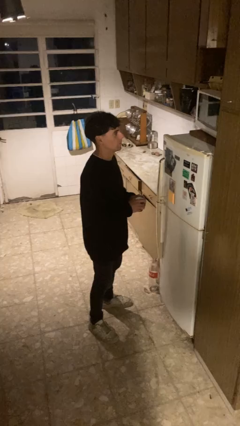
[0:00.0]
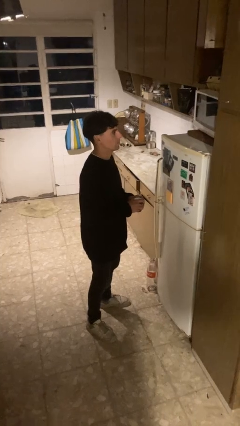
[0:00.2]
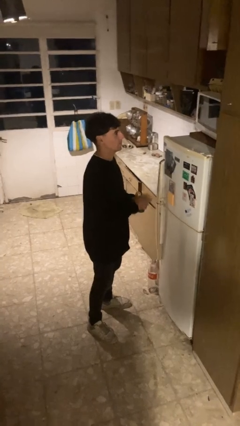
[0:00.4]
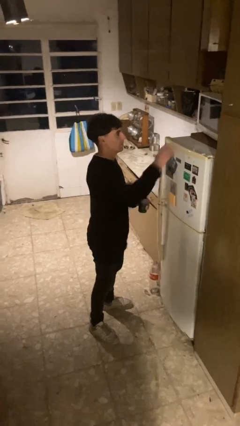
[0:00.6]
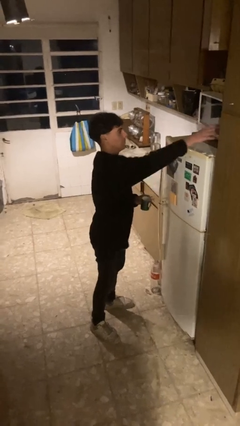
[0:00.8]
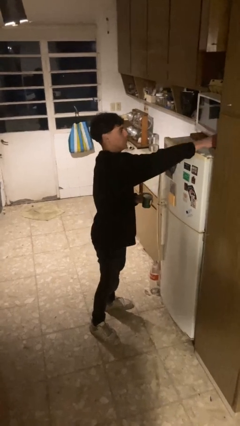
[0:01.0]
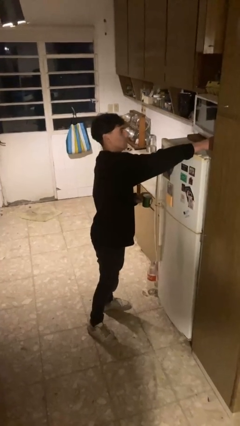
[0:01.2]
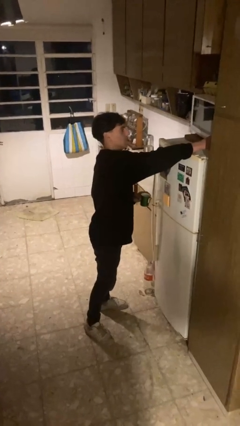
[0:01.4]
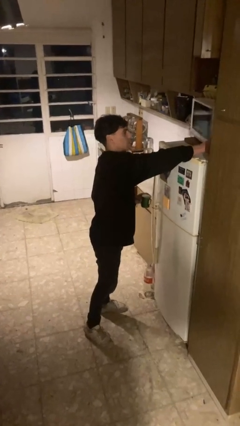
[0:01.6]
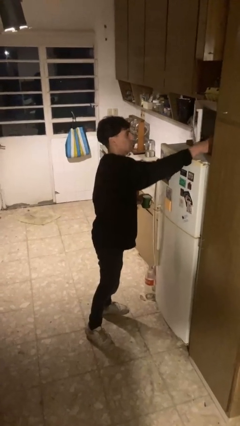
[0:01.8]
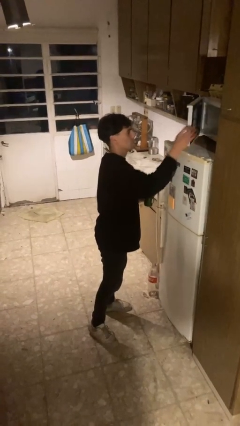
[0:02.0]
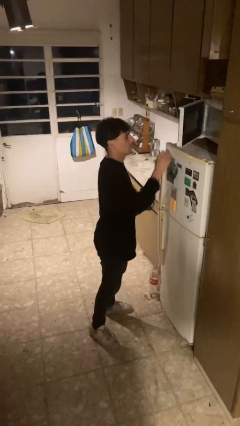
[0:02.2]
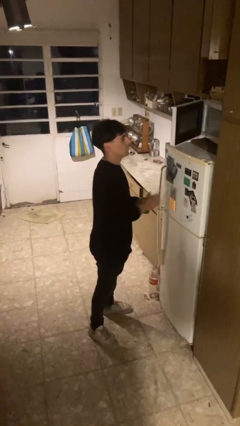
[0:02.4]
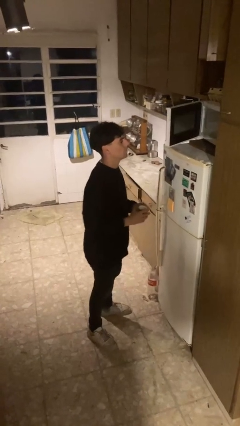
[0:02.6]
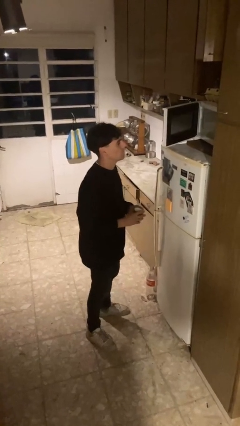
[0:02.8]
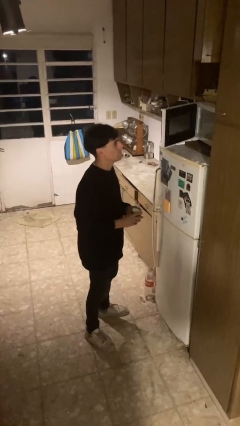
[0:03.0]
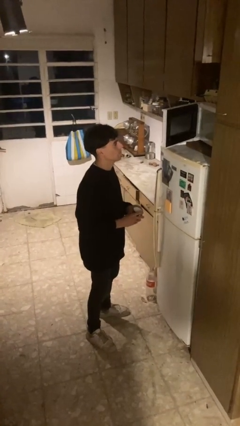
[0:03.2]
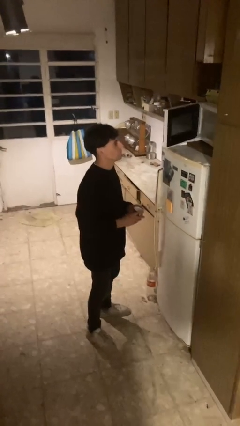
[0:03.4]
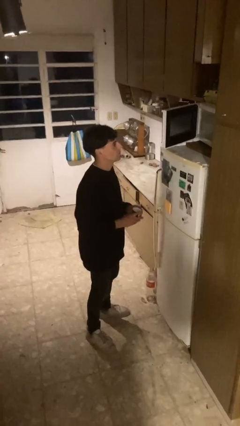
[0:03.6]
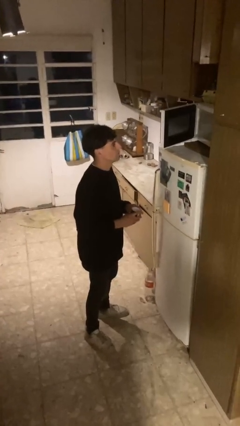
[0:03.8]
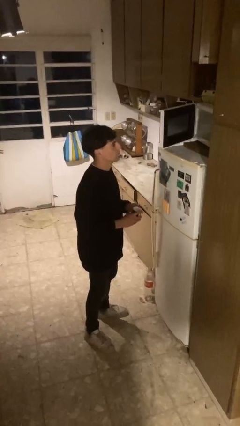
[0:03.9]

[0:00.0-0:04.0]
person opens microwave

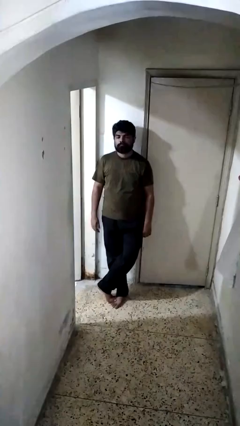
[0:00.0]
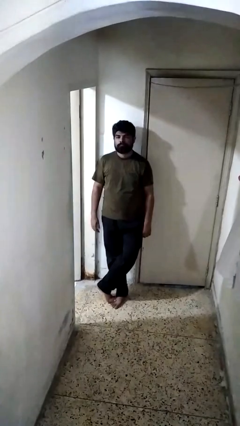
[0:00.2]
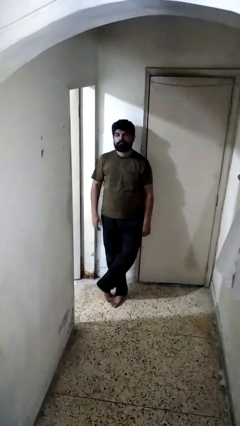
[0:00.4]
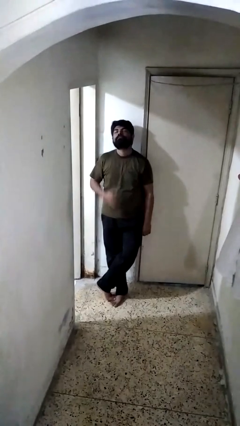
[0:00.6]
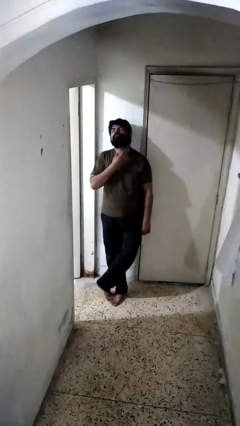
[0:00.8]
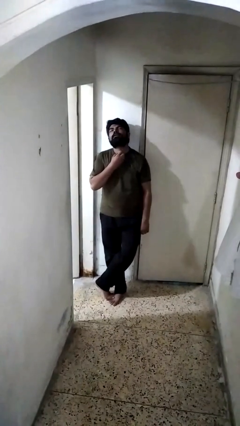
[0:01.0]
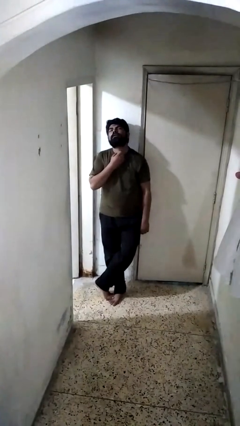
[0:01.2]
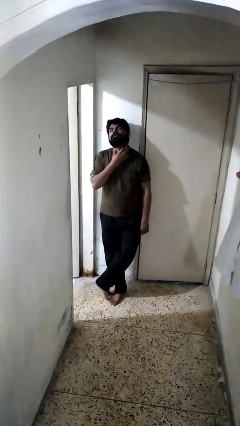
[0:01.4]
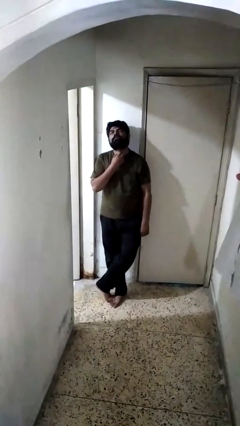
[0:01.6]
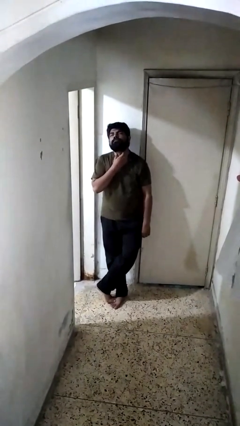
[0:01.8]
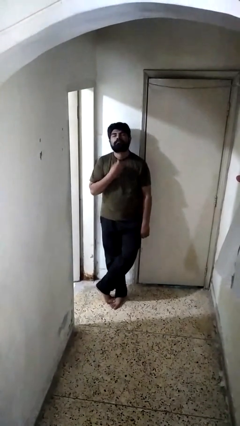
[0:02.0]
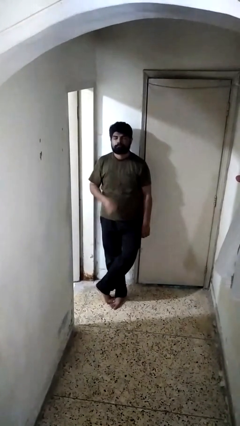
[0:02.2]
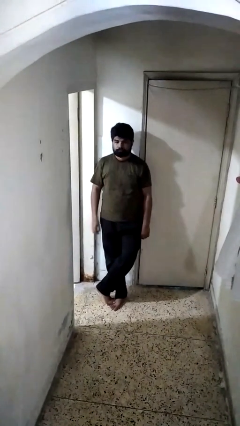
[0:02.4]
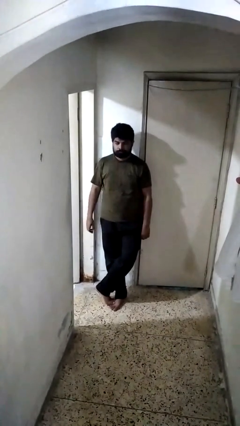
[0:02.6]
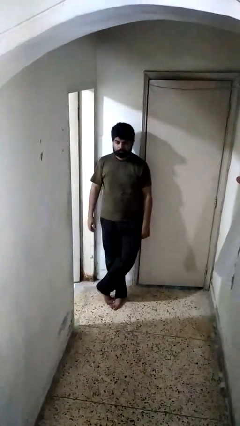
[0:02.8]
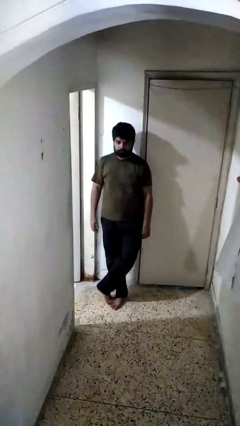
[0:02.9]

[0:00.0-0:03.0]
person rubs neck

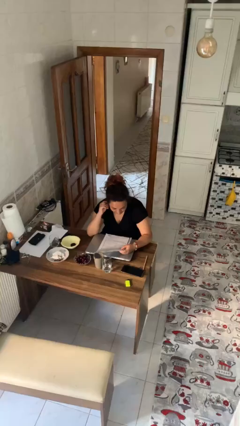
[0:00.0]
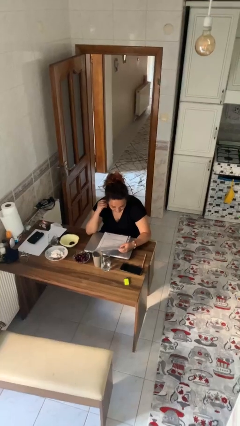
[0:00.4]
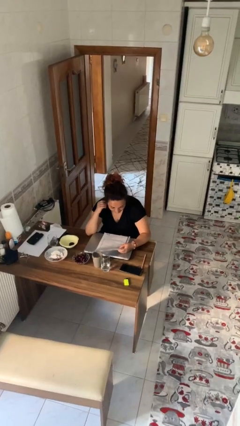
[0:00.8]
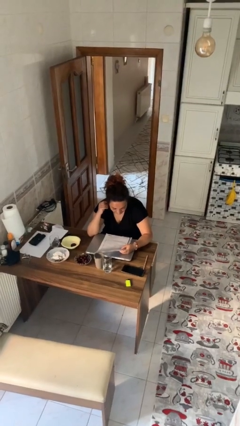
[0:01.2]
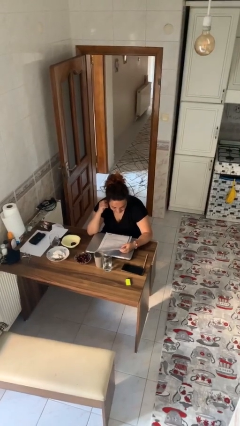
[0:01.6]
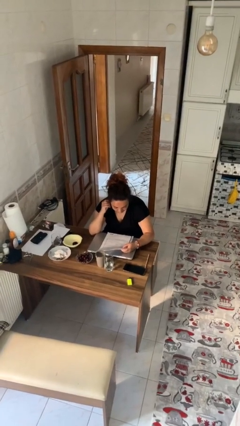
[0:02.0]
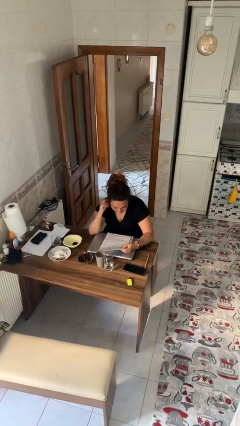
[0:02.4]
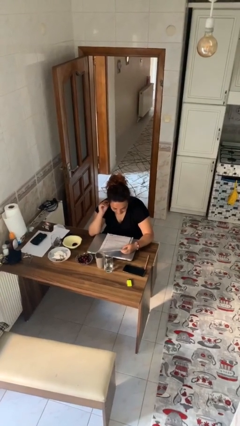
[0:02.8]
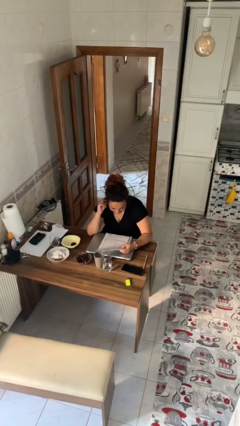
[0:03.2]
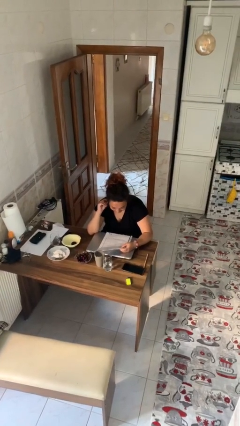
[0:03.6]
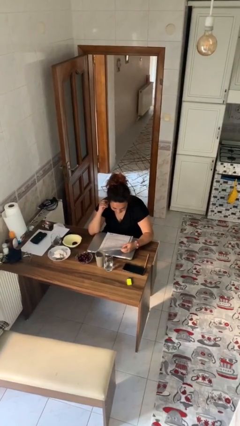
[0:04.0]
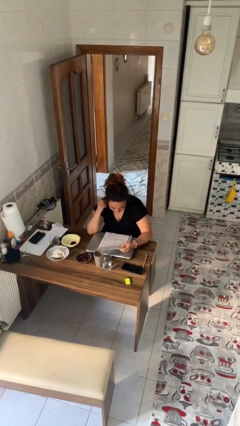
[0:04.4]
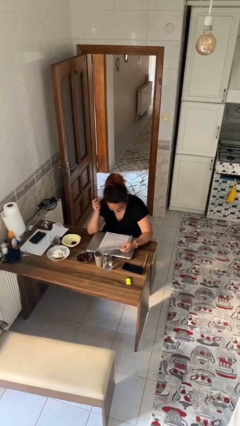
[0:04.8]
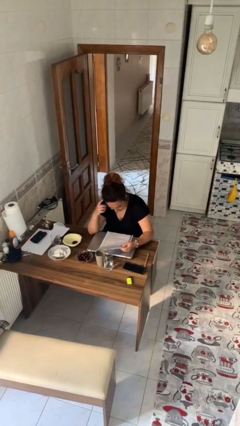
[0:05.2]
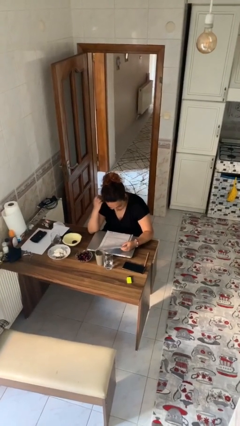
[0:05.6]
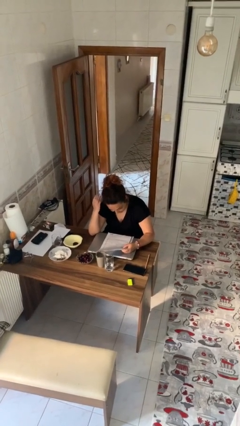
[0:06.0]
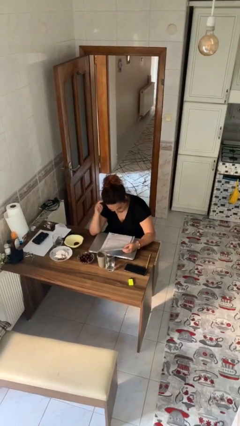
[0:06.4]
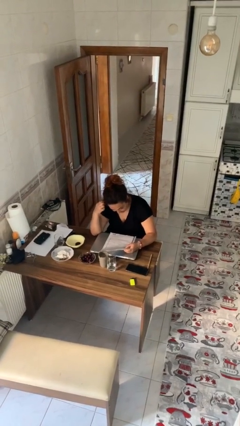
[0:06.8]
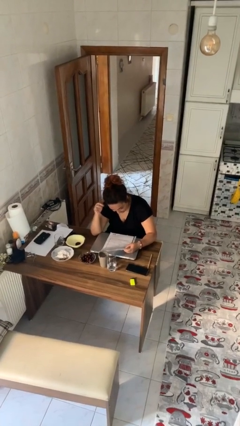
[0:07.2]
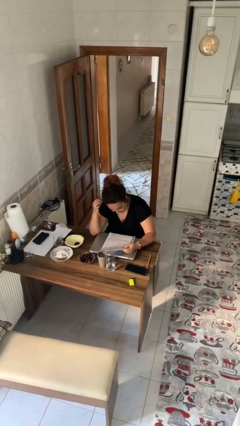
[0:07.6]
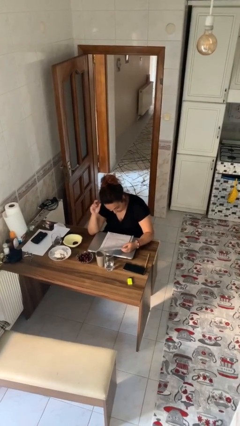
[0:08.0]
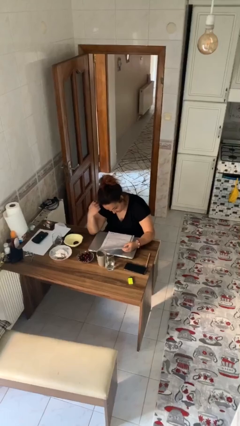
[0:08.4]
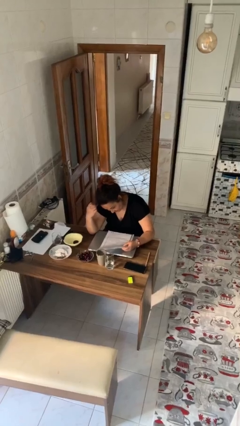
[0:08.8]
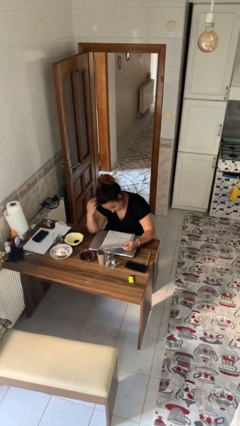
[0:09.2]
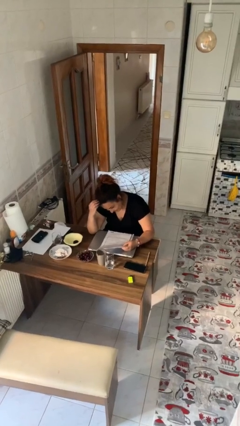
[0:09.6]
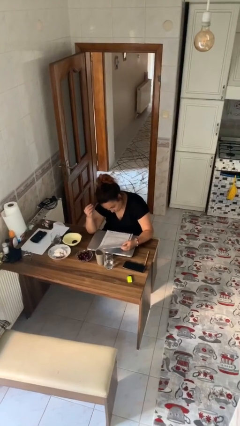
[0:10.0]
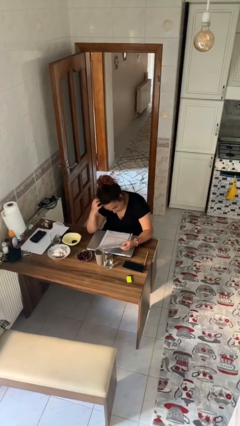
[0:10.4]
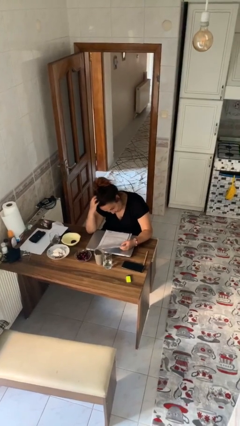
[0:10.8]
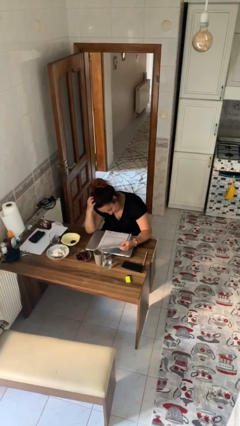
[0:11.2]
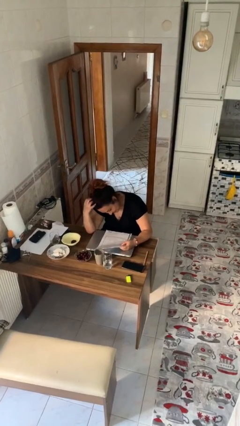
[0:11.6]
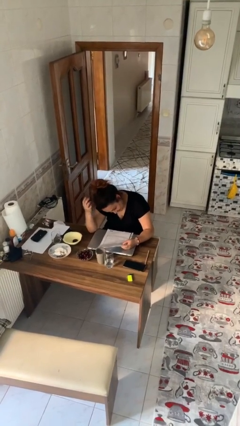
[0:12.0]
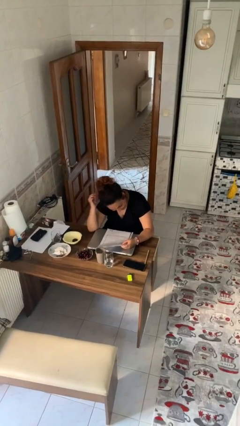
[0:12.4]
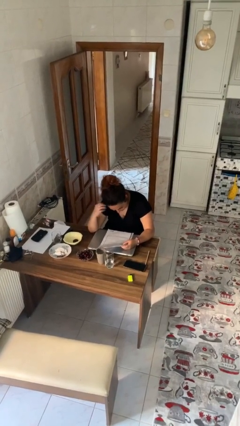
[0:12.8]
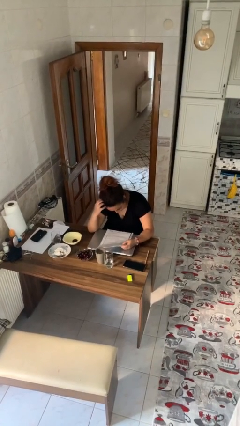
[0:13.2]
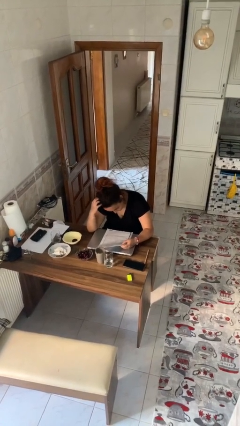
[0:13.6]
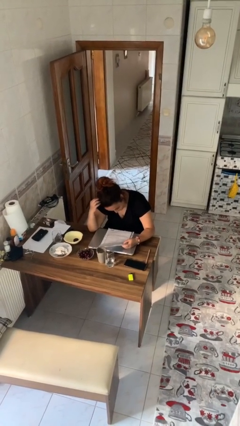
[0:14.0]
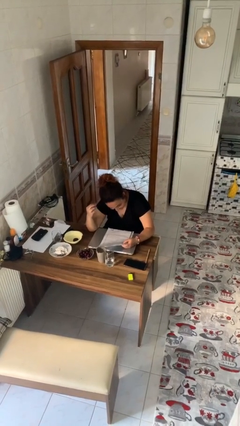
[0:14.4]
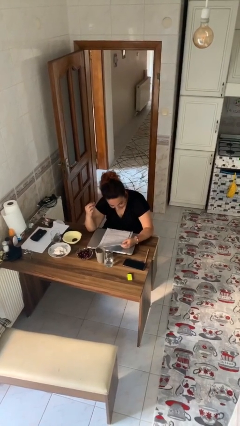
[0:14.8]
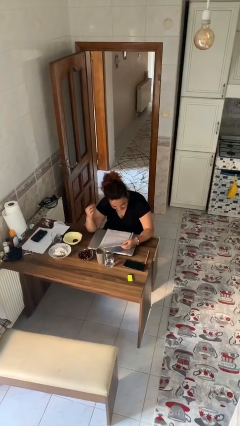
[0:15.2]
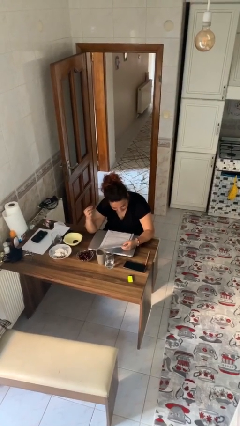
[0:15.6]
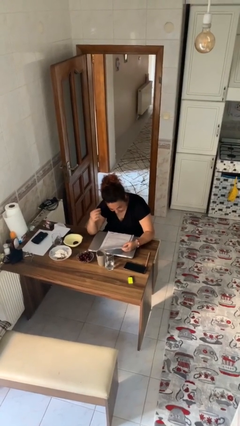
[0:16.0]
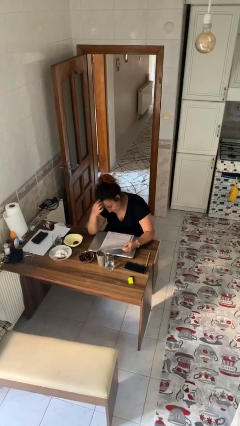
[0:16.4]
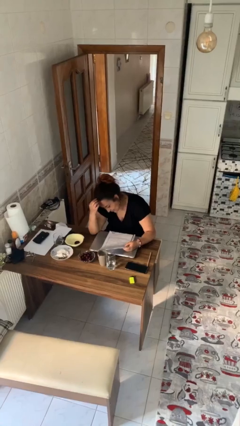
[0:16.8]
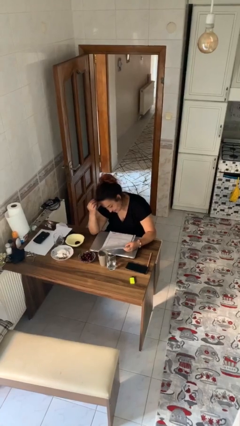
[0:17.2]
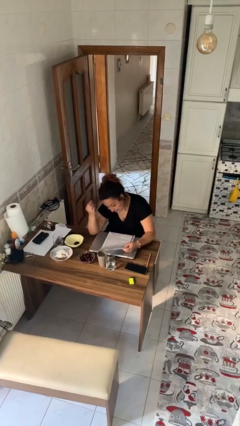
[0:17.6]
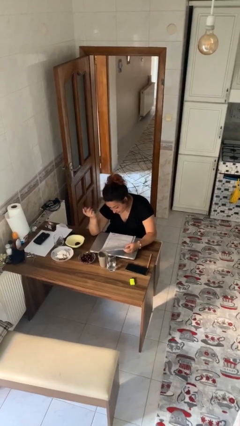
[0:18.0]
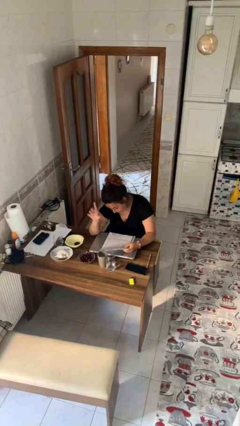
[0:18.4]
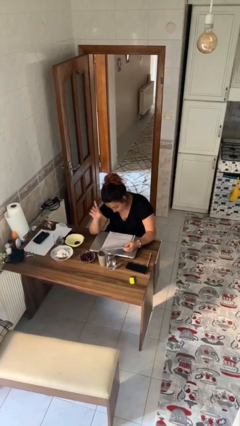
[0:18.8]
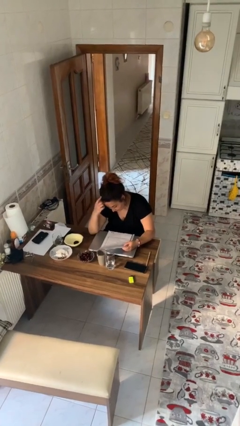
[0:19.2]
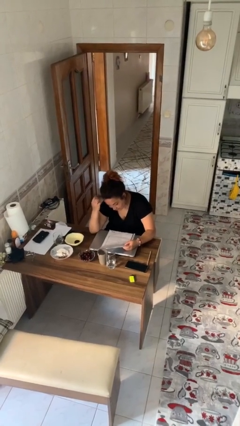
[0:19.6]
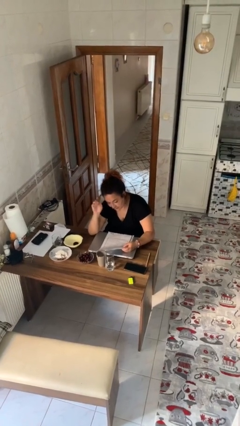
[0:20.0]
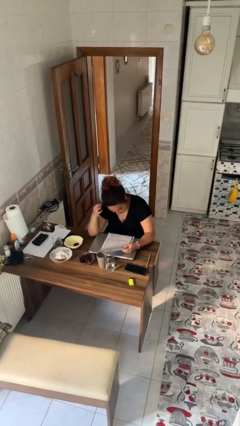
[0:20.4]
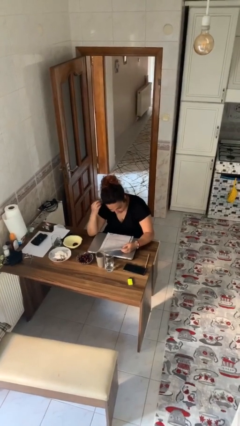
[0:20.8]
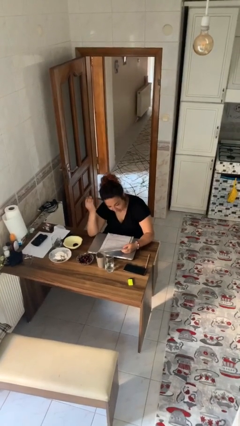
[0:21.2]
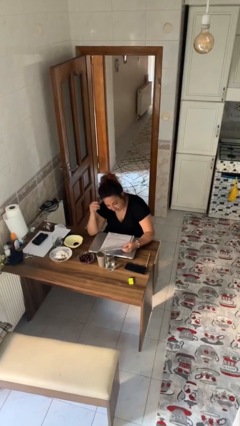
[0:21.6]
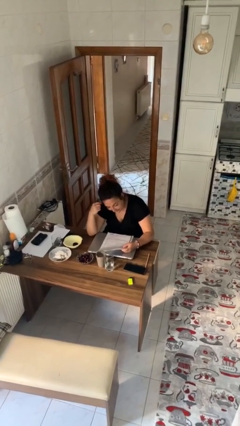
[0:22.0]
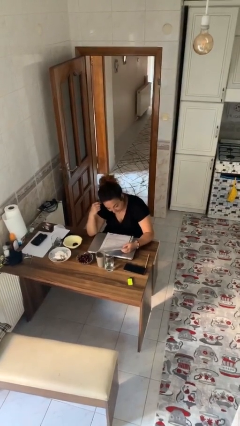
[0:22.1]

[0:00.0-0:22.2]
person reads document
